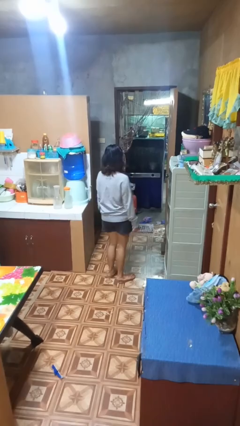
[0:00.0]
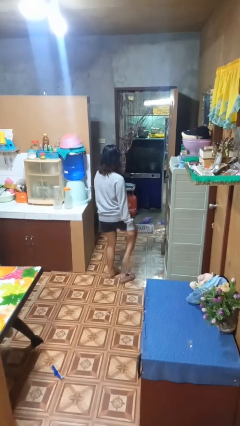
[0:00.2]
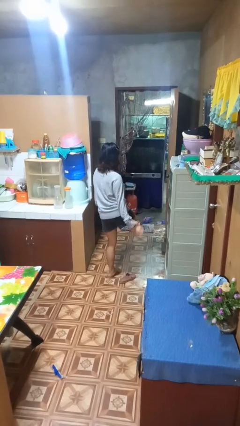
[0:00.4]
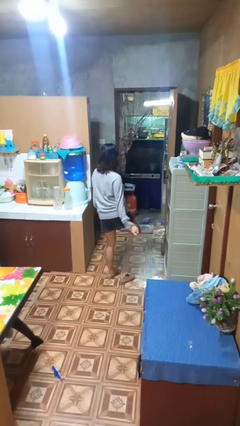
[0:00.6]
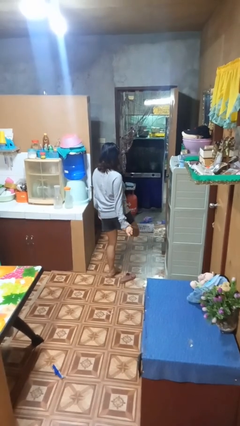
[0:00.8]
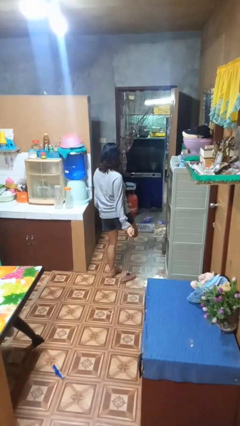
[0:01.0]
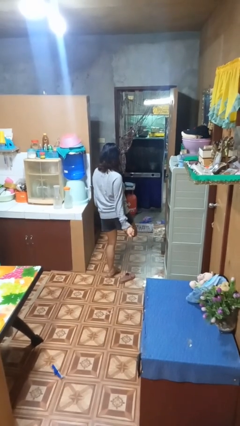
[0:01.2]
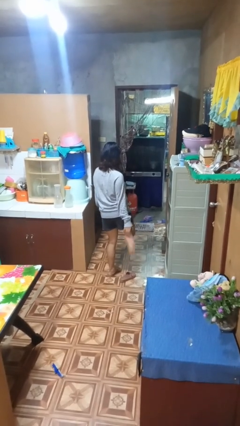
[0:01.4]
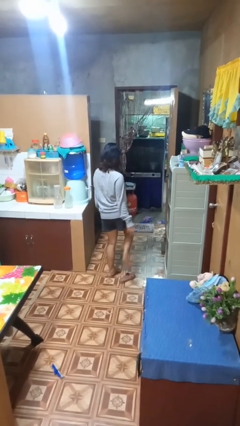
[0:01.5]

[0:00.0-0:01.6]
person rubs foot

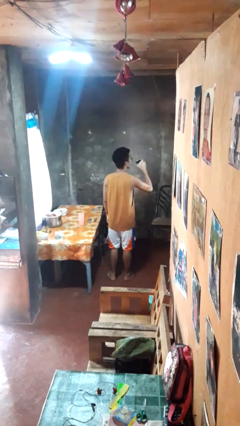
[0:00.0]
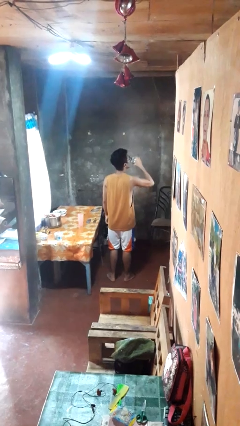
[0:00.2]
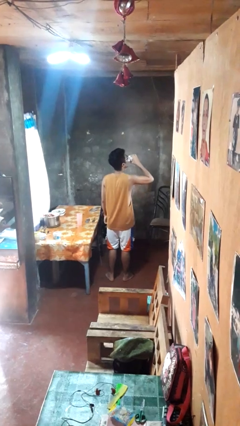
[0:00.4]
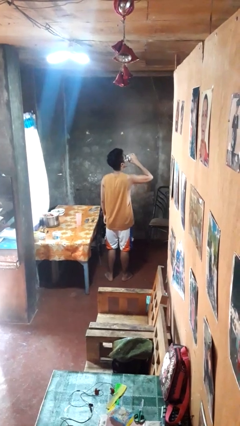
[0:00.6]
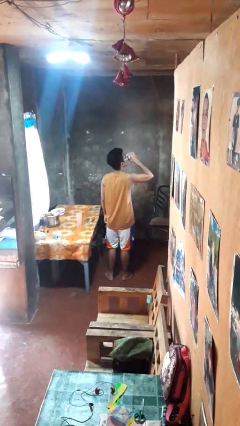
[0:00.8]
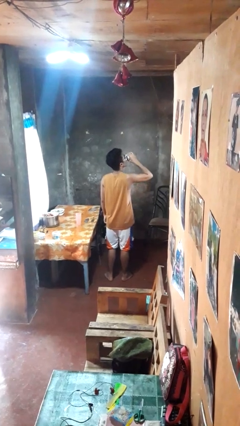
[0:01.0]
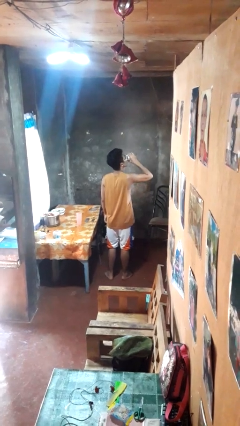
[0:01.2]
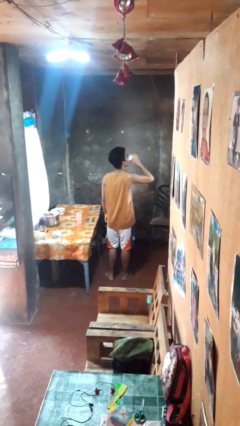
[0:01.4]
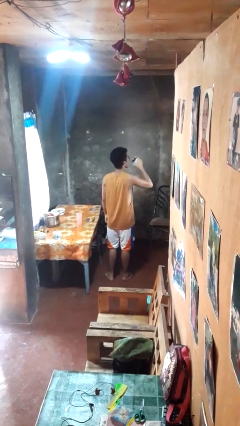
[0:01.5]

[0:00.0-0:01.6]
person drinks from beverage can

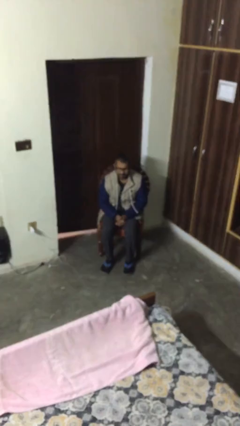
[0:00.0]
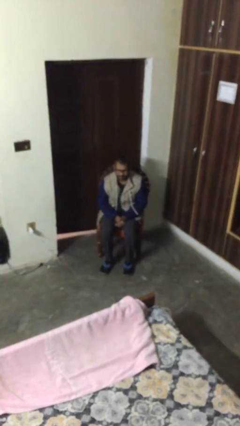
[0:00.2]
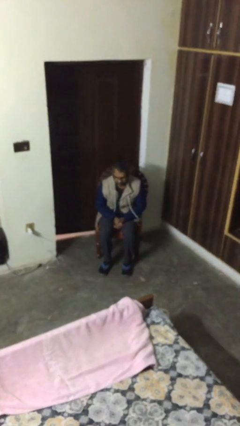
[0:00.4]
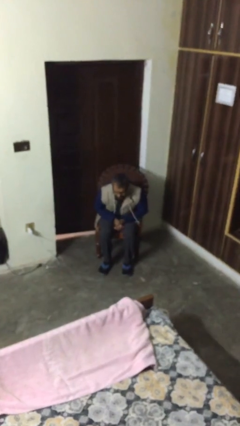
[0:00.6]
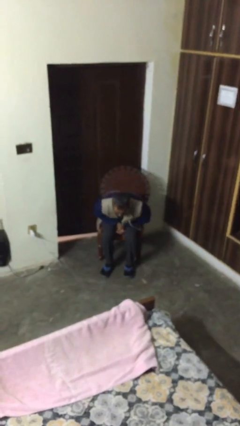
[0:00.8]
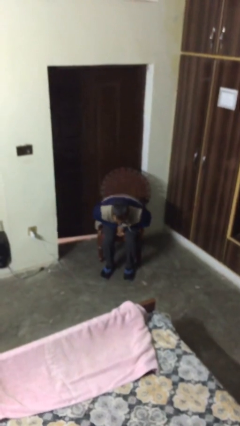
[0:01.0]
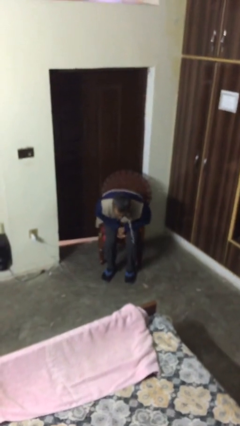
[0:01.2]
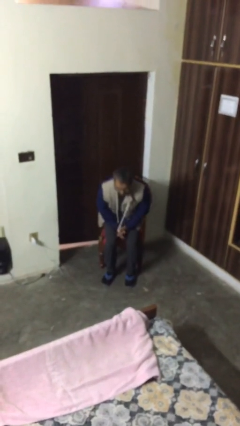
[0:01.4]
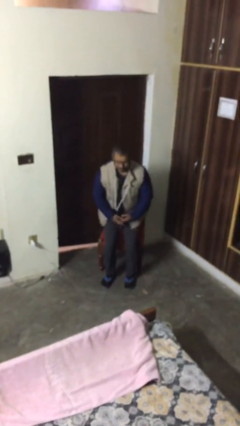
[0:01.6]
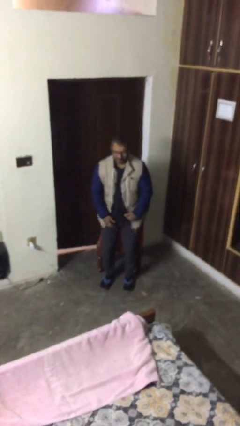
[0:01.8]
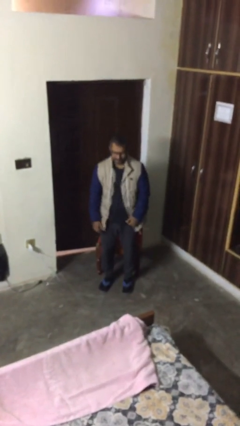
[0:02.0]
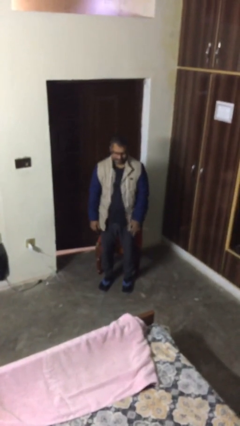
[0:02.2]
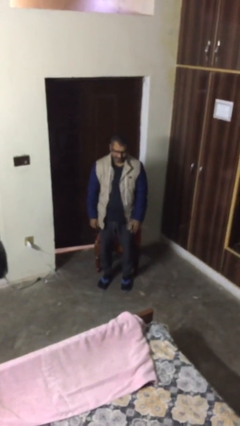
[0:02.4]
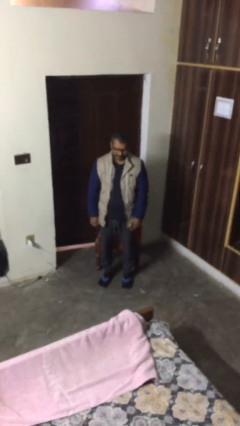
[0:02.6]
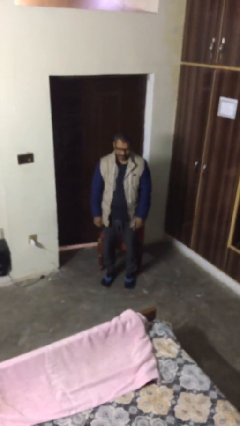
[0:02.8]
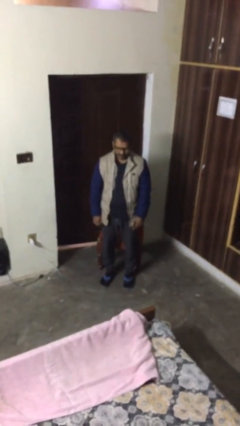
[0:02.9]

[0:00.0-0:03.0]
person stands up

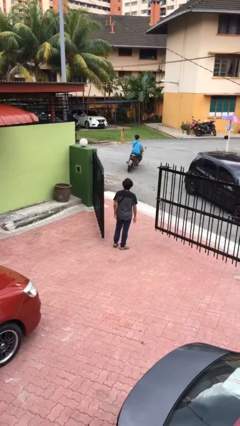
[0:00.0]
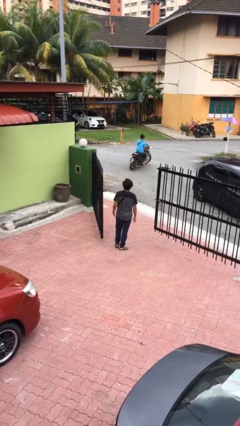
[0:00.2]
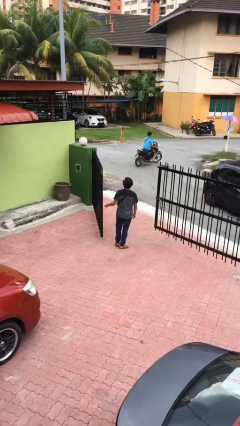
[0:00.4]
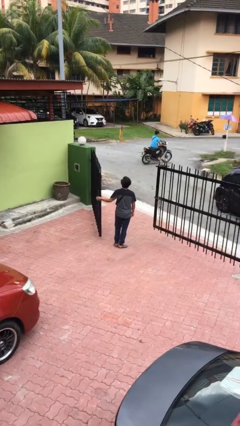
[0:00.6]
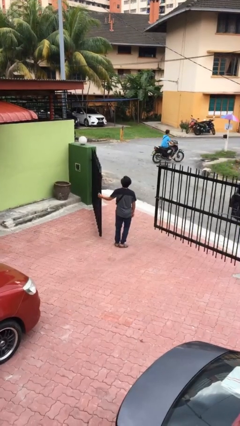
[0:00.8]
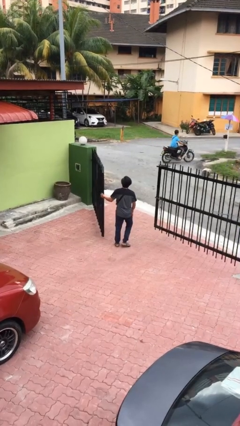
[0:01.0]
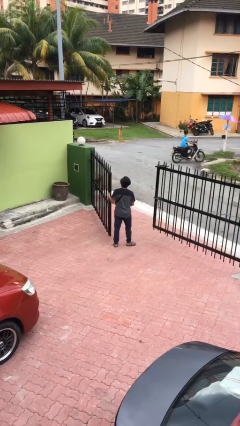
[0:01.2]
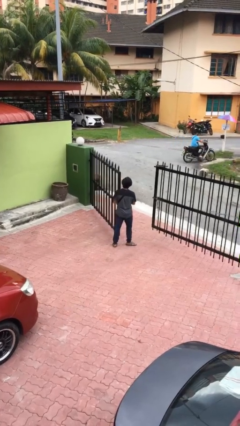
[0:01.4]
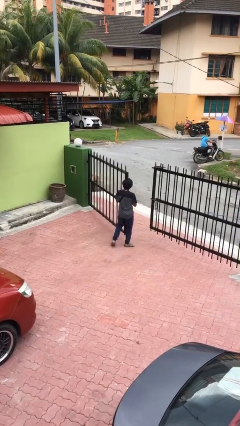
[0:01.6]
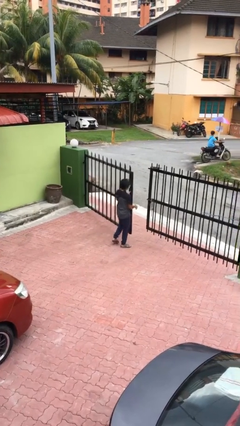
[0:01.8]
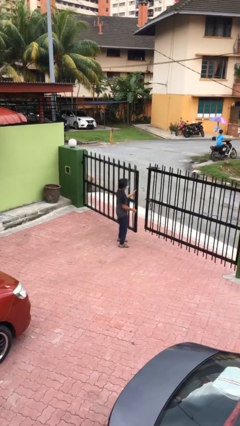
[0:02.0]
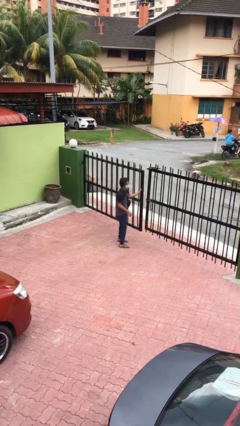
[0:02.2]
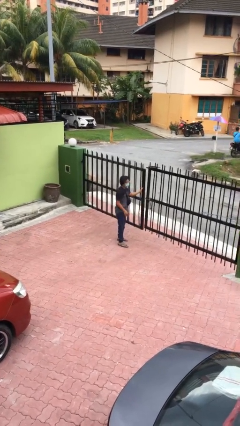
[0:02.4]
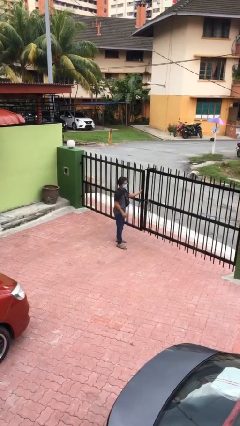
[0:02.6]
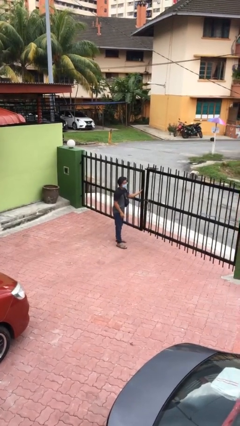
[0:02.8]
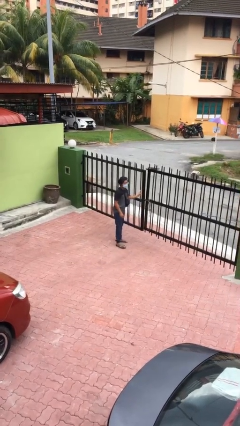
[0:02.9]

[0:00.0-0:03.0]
person closes facility door

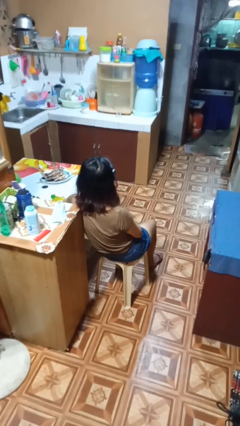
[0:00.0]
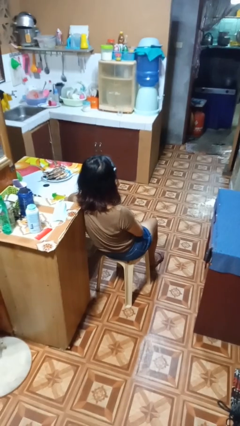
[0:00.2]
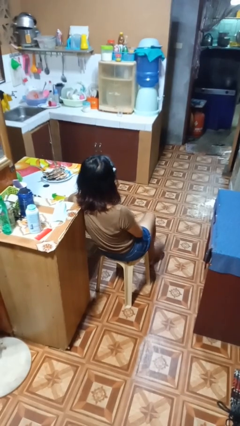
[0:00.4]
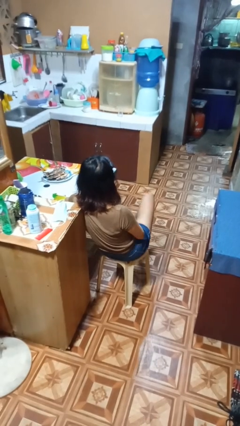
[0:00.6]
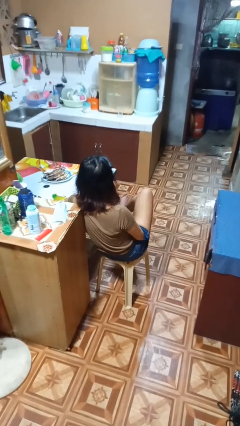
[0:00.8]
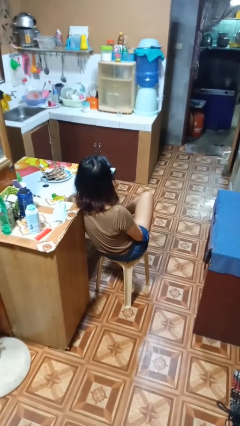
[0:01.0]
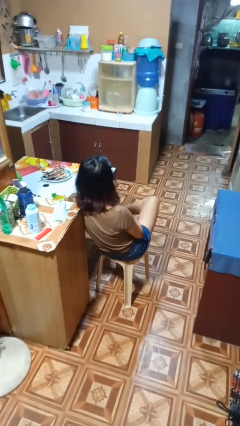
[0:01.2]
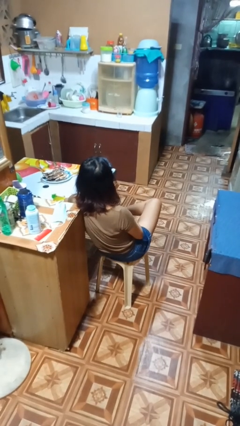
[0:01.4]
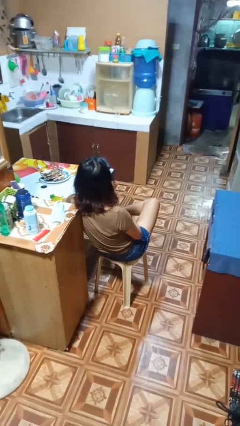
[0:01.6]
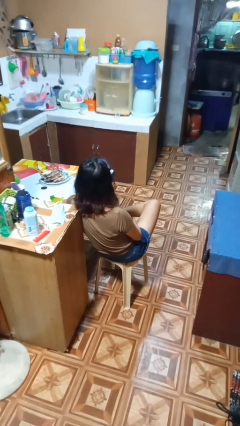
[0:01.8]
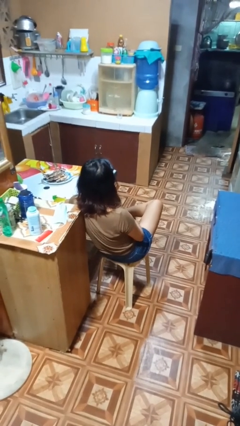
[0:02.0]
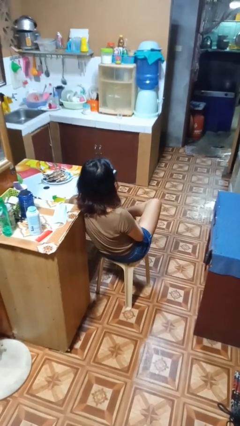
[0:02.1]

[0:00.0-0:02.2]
person crosses legs

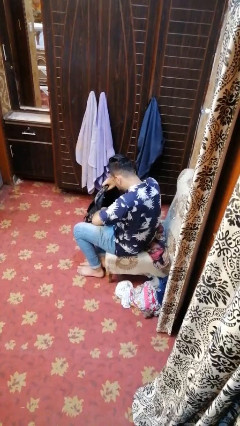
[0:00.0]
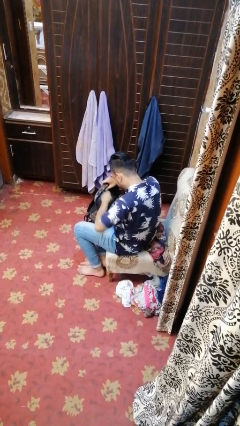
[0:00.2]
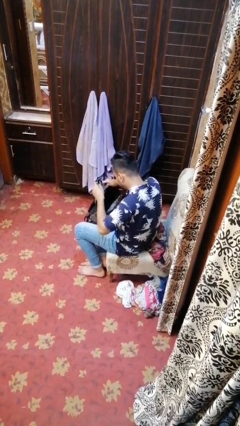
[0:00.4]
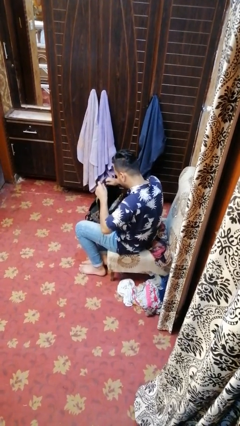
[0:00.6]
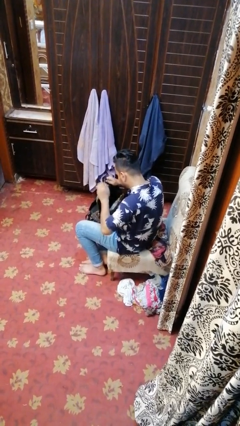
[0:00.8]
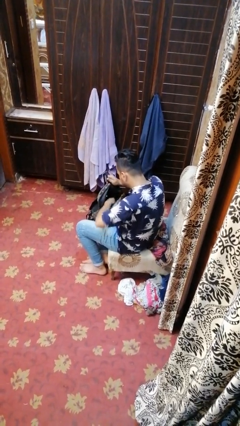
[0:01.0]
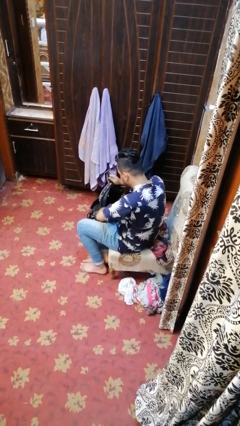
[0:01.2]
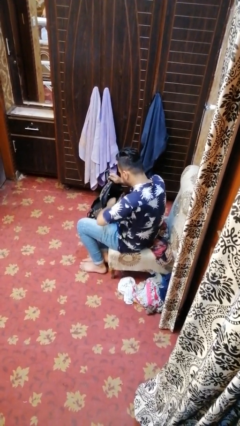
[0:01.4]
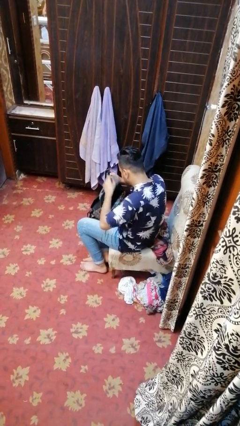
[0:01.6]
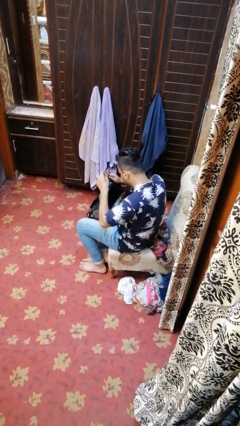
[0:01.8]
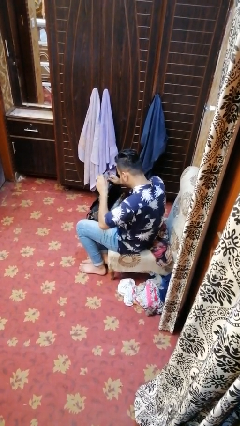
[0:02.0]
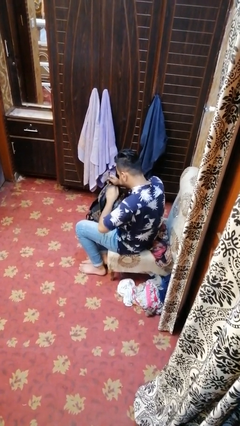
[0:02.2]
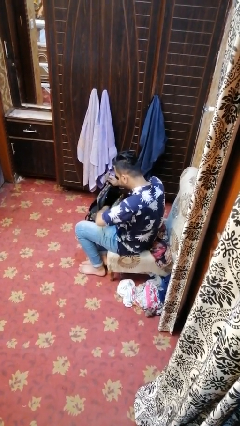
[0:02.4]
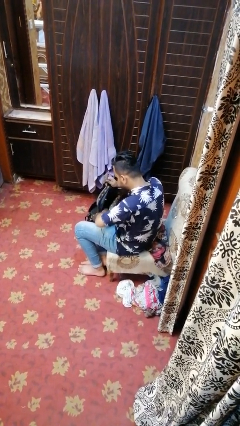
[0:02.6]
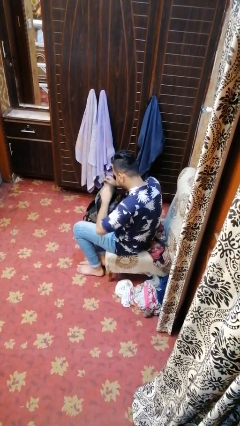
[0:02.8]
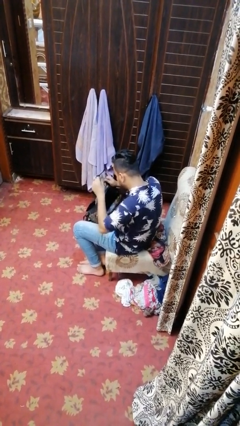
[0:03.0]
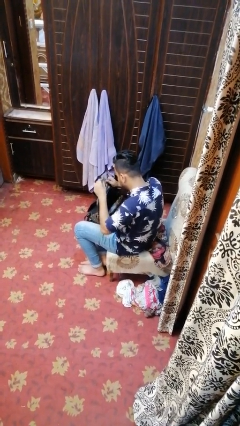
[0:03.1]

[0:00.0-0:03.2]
person takes object from backpack

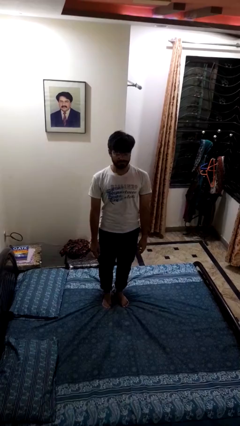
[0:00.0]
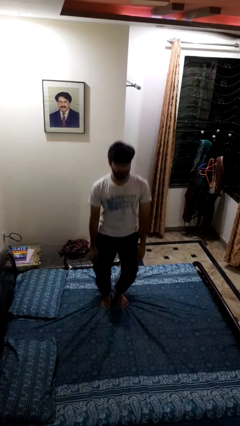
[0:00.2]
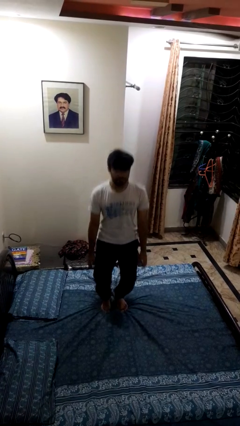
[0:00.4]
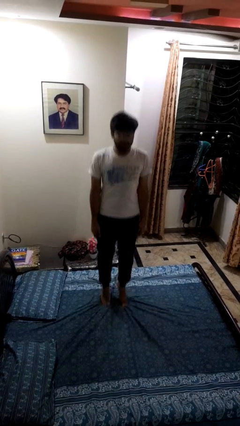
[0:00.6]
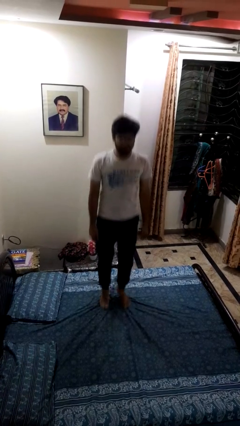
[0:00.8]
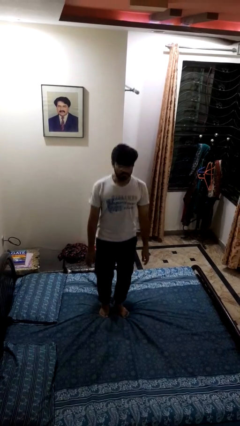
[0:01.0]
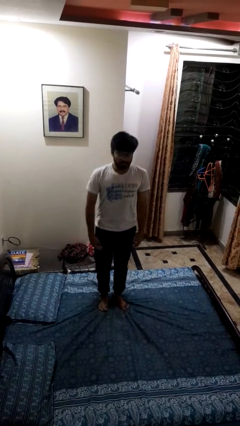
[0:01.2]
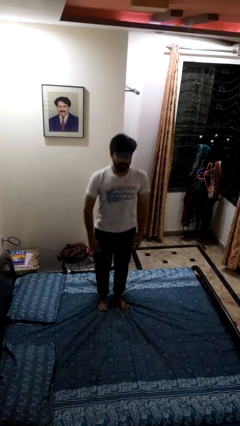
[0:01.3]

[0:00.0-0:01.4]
person jumps on bed

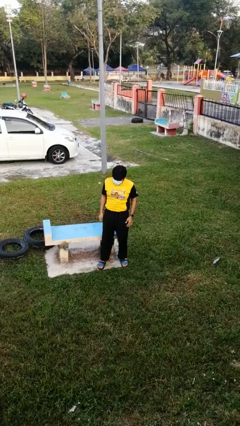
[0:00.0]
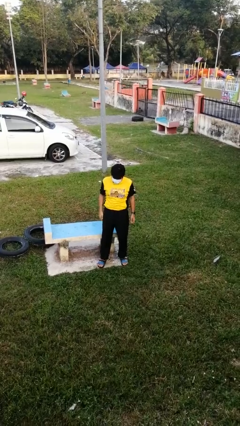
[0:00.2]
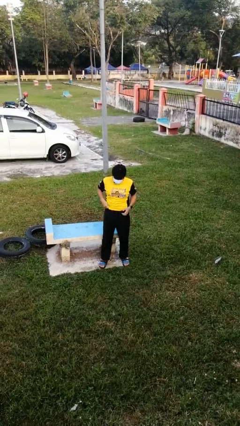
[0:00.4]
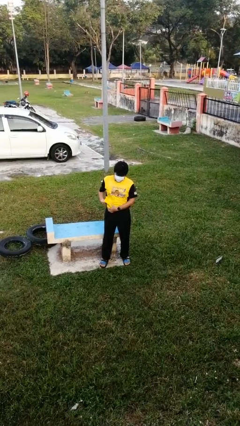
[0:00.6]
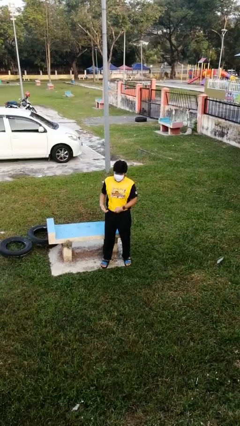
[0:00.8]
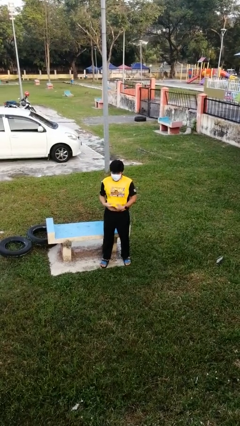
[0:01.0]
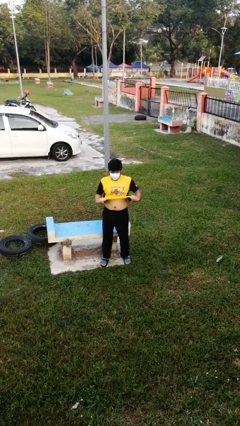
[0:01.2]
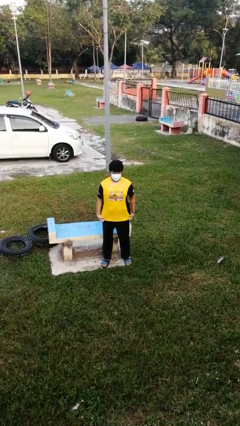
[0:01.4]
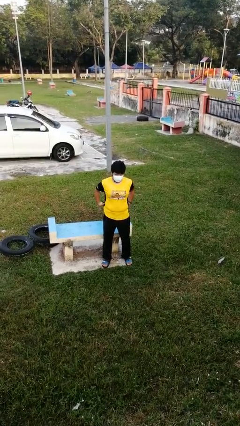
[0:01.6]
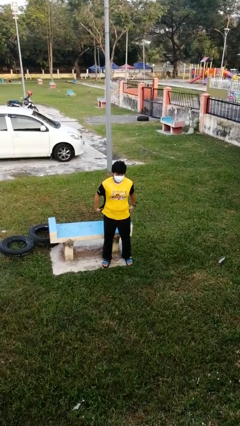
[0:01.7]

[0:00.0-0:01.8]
person untucks shirt
